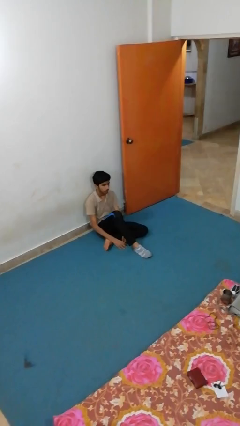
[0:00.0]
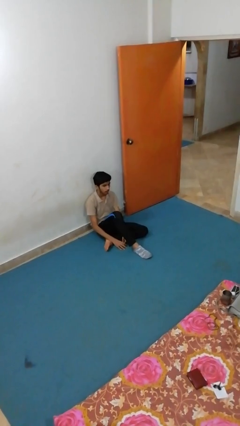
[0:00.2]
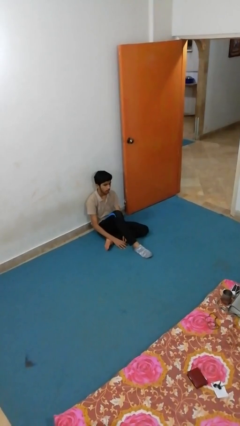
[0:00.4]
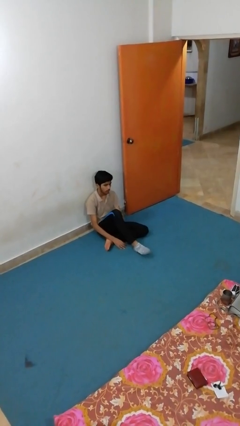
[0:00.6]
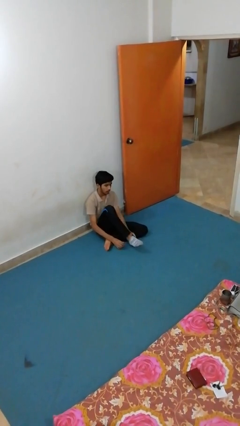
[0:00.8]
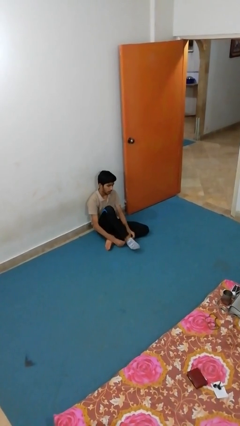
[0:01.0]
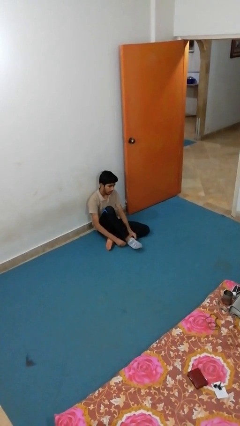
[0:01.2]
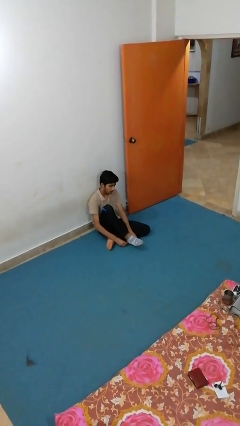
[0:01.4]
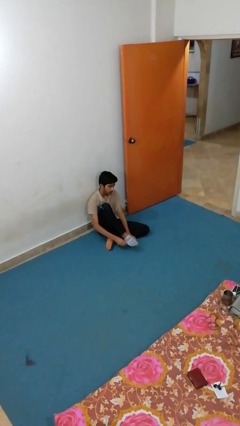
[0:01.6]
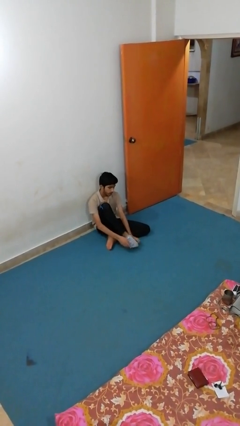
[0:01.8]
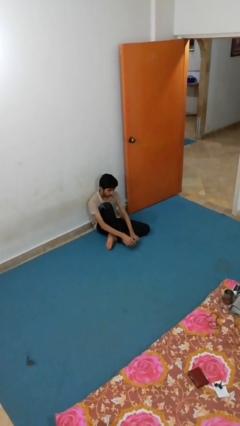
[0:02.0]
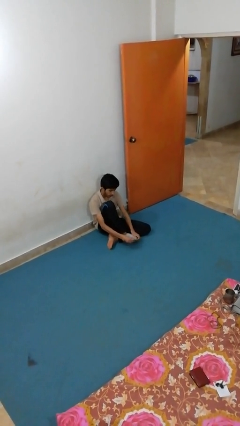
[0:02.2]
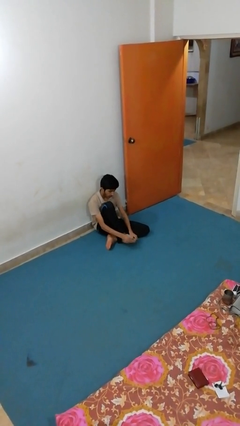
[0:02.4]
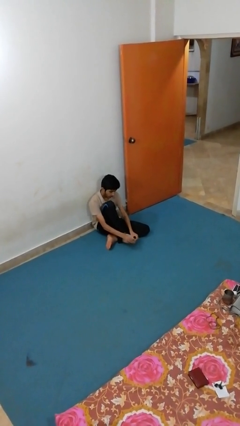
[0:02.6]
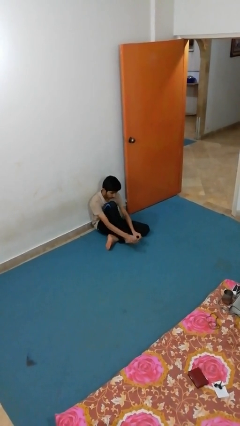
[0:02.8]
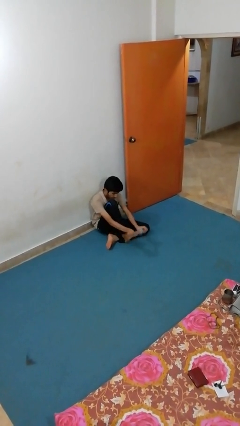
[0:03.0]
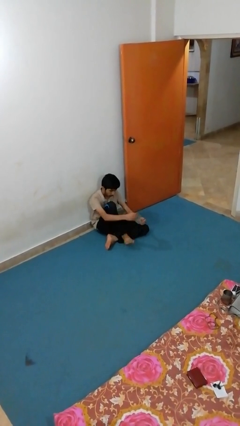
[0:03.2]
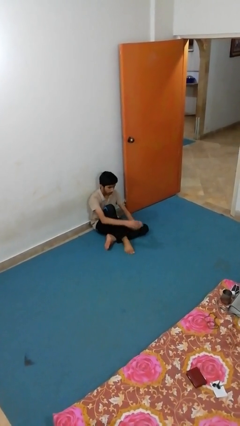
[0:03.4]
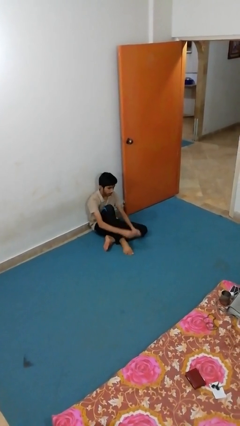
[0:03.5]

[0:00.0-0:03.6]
person takes off socks

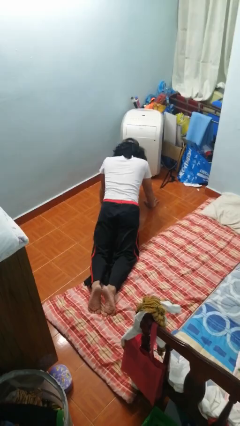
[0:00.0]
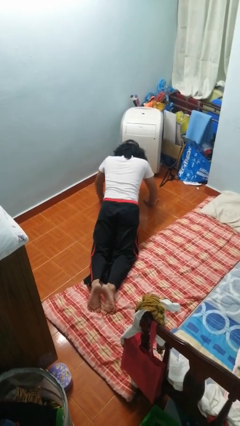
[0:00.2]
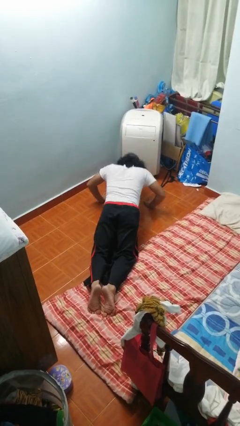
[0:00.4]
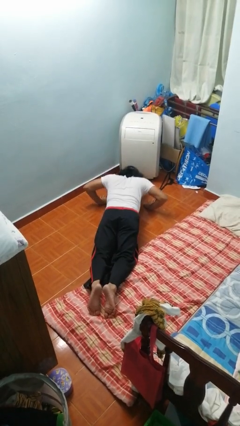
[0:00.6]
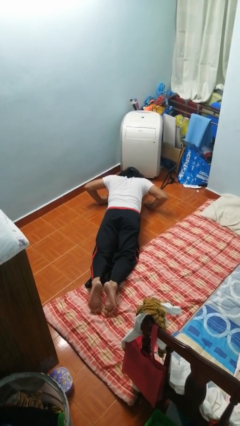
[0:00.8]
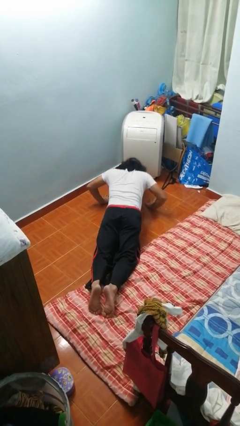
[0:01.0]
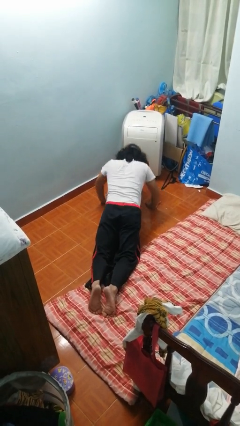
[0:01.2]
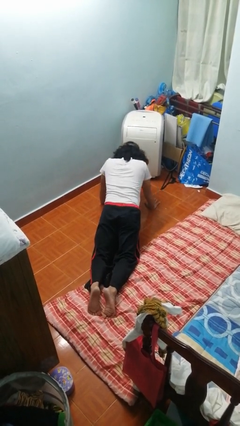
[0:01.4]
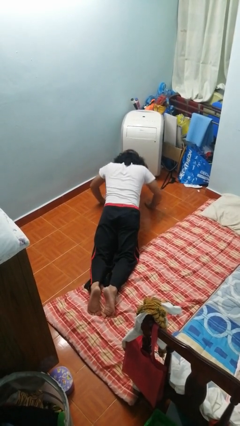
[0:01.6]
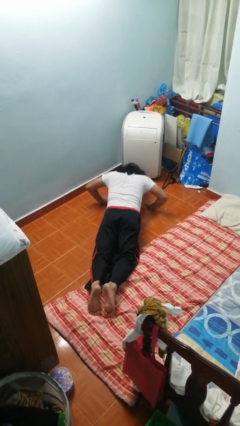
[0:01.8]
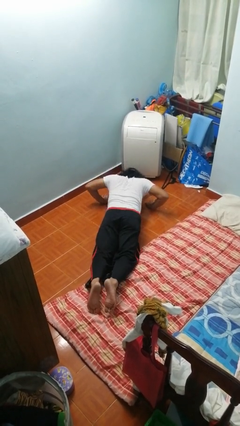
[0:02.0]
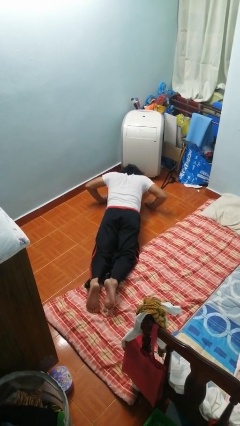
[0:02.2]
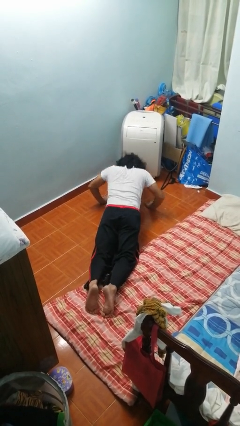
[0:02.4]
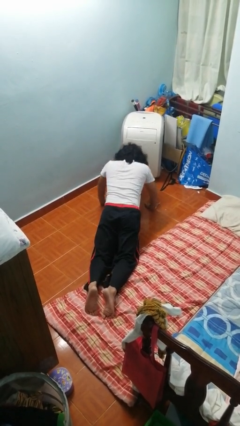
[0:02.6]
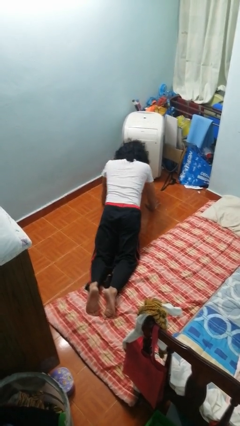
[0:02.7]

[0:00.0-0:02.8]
person exercises with pushup

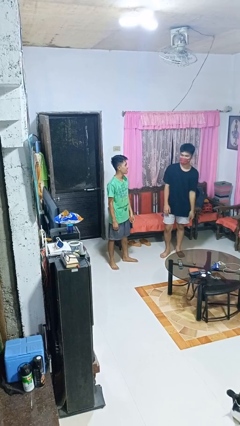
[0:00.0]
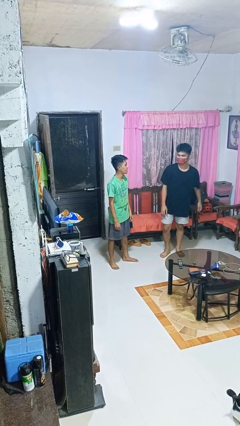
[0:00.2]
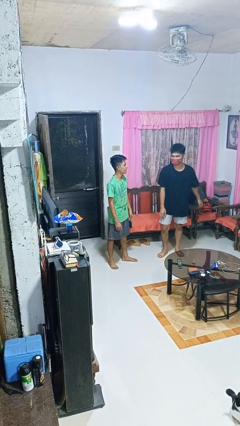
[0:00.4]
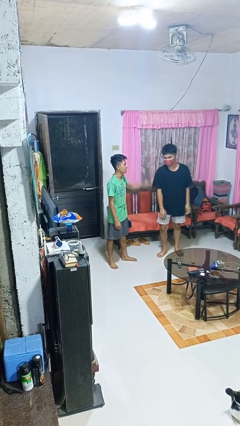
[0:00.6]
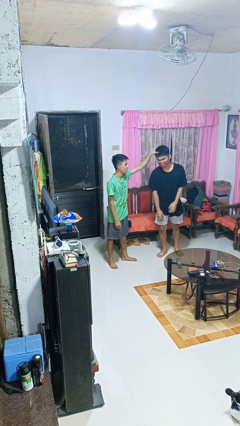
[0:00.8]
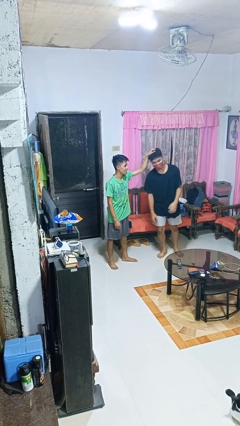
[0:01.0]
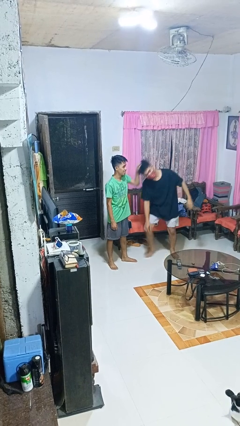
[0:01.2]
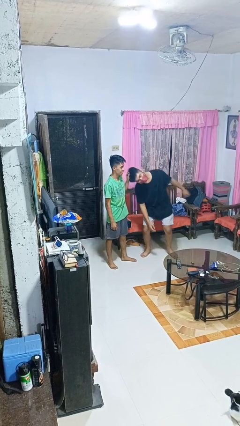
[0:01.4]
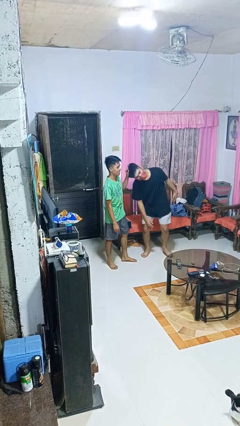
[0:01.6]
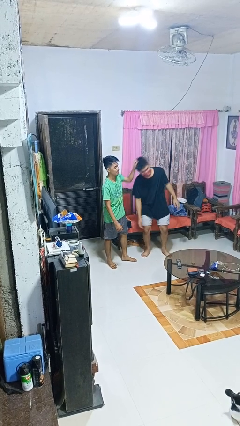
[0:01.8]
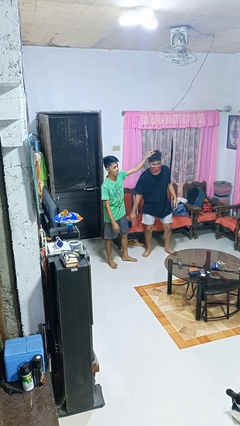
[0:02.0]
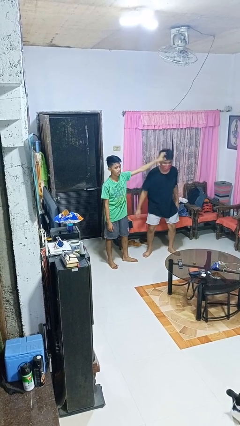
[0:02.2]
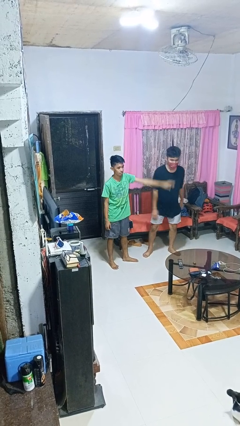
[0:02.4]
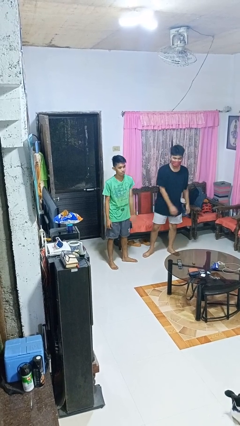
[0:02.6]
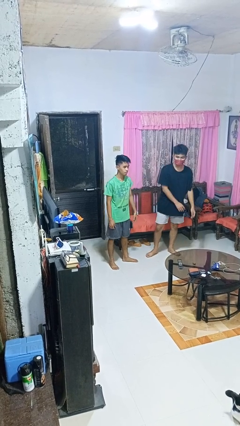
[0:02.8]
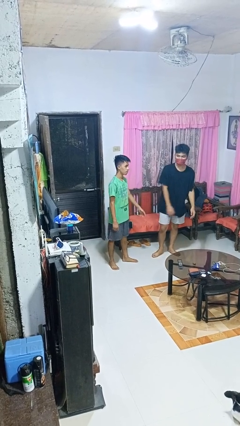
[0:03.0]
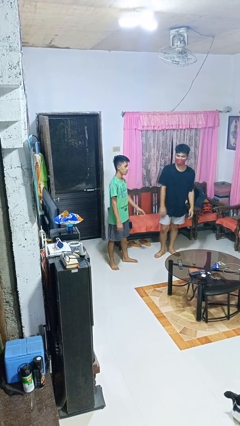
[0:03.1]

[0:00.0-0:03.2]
person grabs person by hair

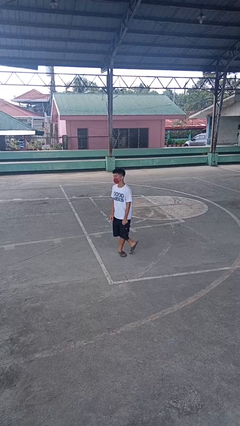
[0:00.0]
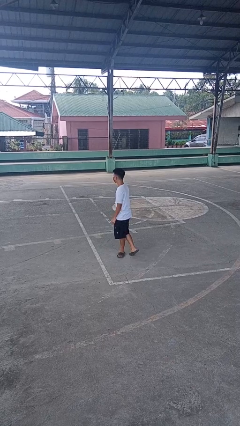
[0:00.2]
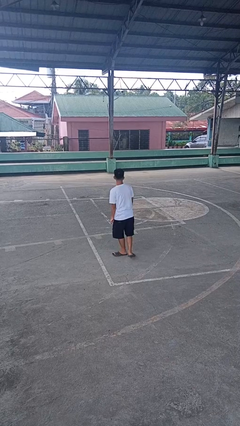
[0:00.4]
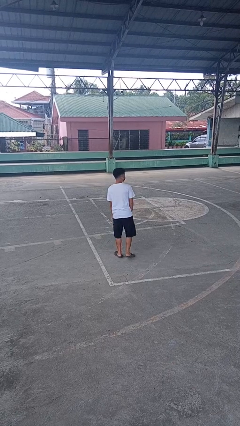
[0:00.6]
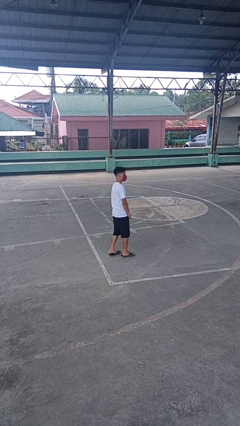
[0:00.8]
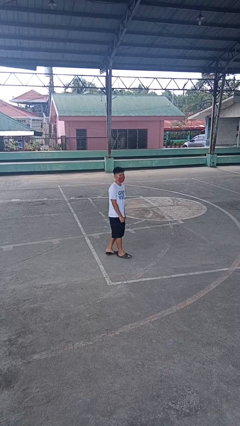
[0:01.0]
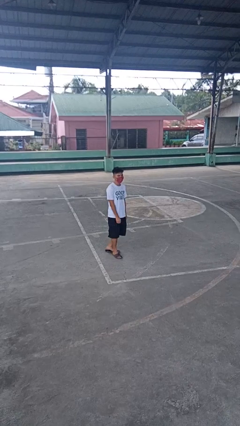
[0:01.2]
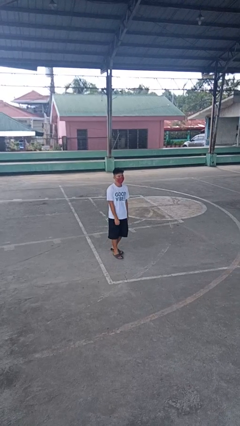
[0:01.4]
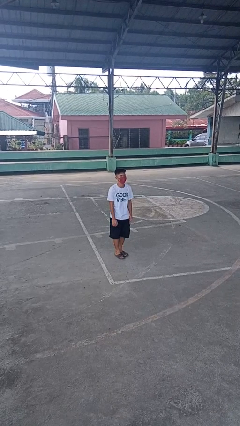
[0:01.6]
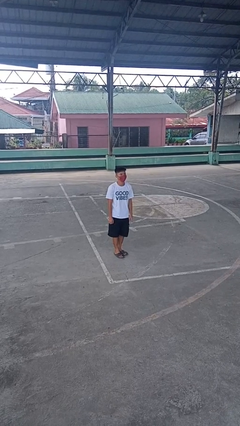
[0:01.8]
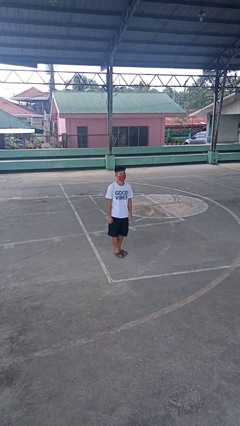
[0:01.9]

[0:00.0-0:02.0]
person twirls

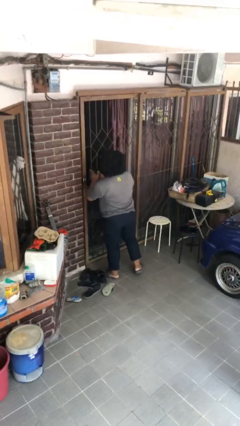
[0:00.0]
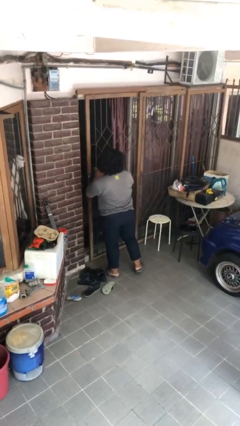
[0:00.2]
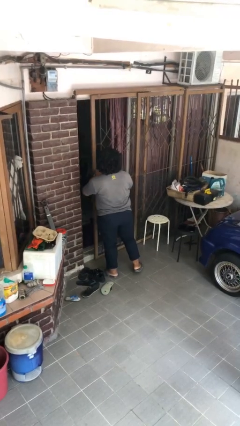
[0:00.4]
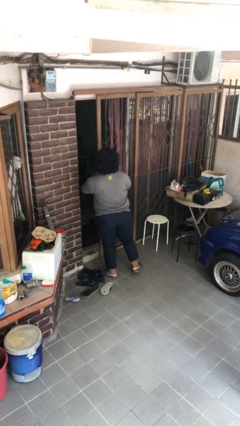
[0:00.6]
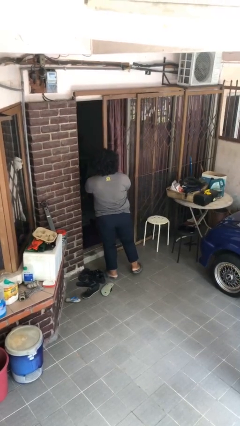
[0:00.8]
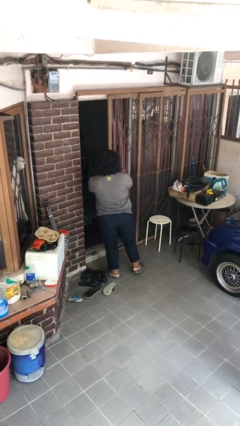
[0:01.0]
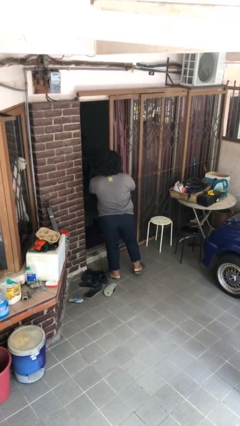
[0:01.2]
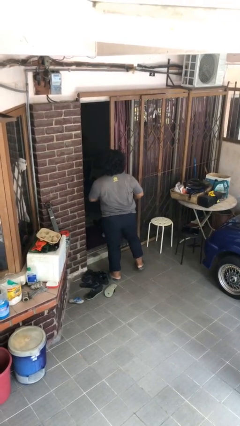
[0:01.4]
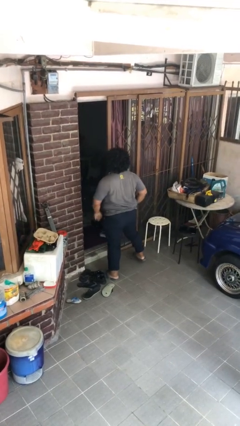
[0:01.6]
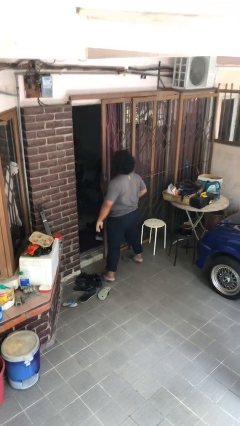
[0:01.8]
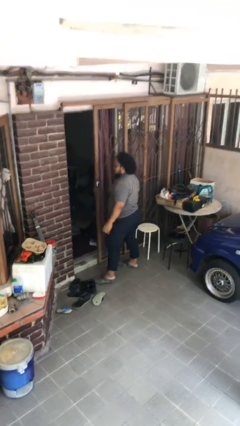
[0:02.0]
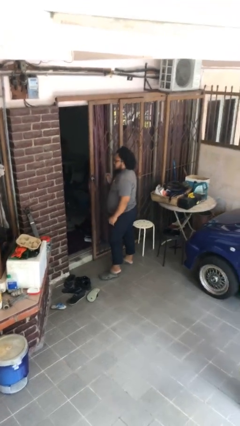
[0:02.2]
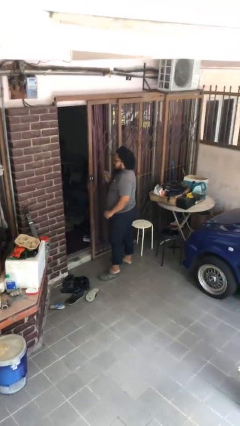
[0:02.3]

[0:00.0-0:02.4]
person opens facility door

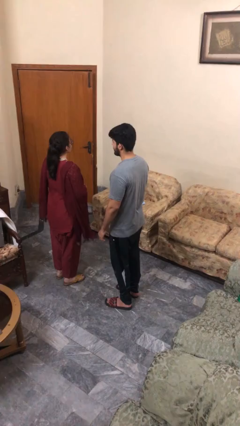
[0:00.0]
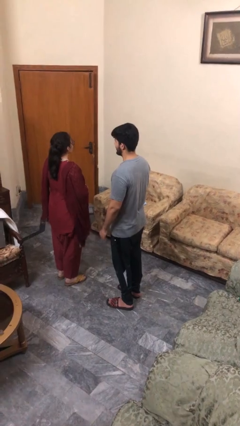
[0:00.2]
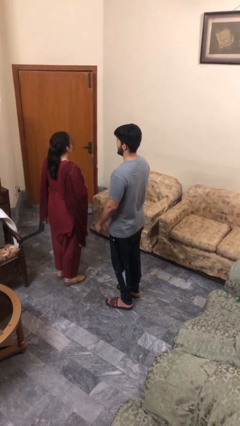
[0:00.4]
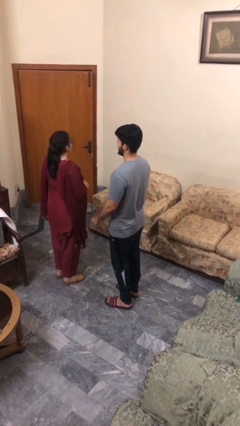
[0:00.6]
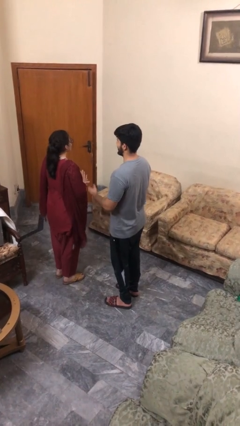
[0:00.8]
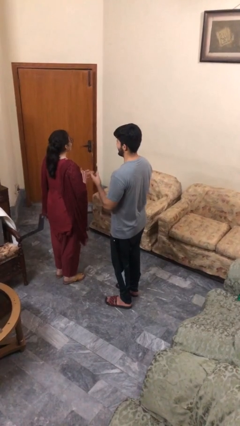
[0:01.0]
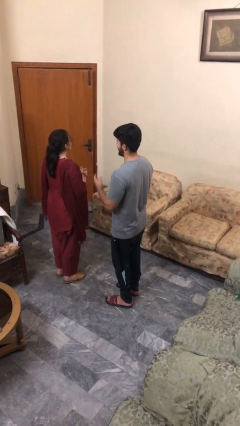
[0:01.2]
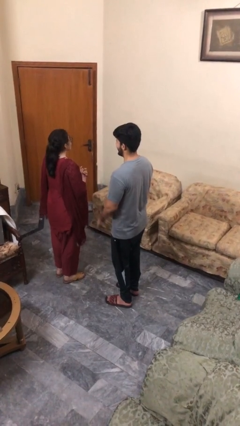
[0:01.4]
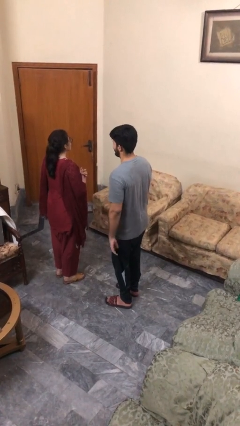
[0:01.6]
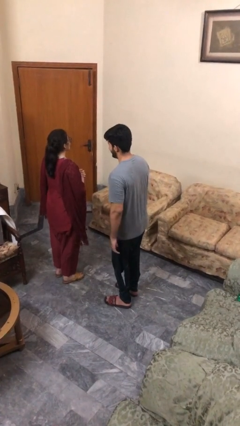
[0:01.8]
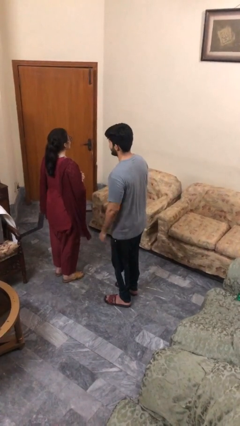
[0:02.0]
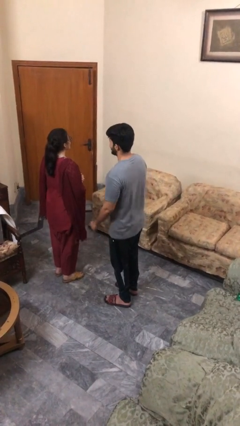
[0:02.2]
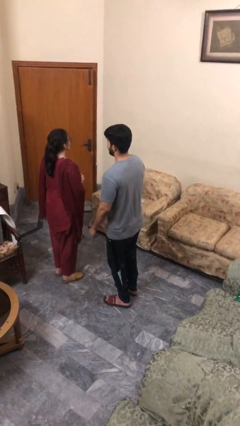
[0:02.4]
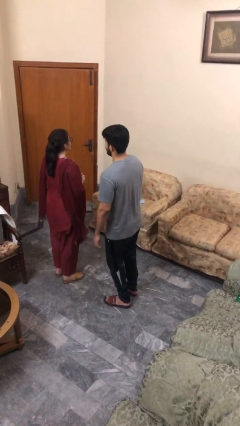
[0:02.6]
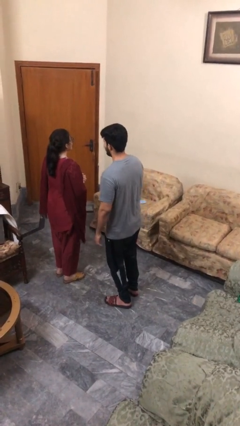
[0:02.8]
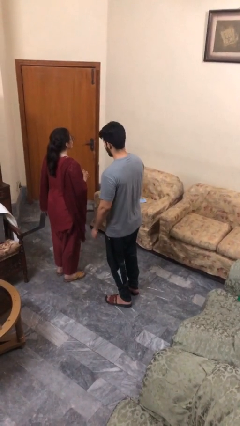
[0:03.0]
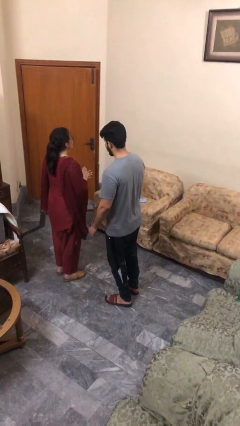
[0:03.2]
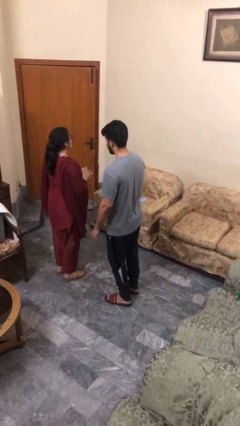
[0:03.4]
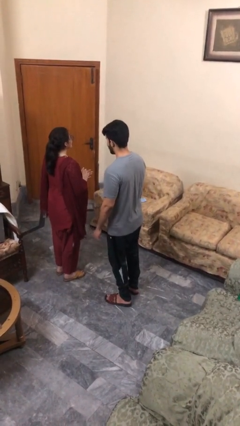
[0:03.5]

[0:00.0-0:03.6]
person laughs with person
